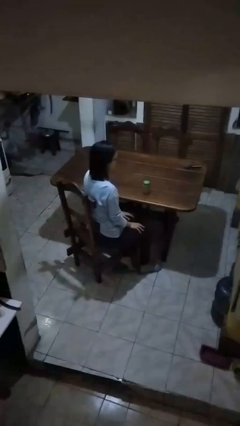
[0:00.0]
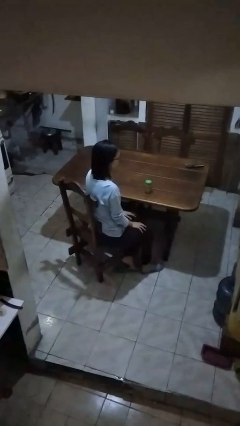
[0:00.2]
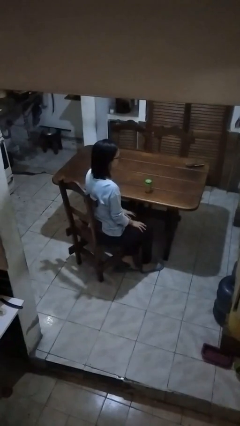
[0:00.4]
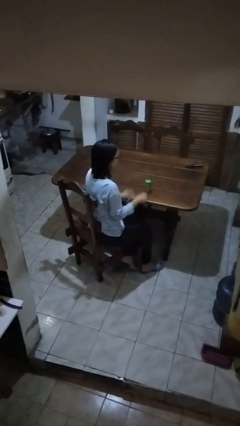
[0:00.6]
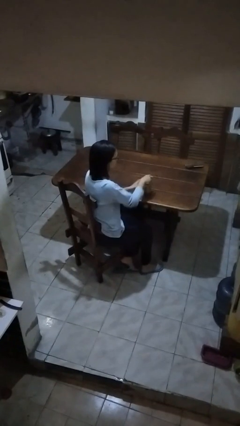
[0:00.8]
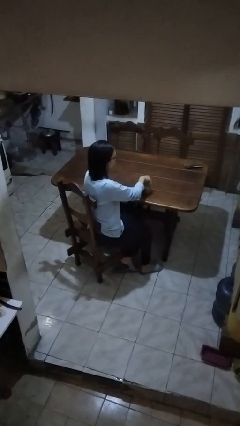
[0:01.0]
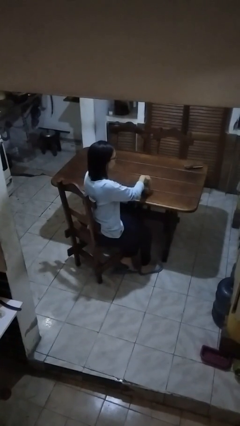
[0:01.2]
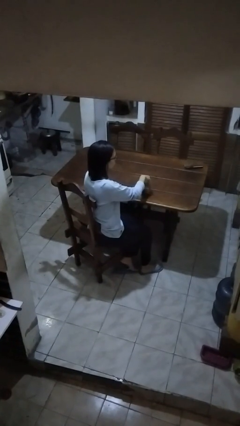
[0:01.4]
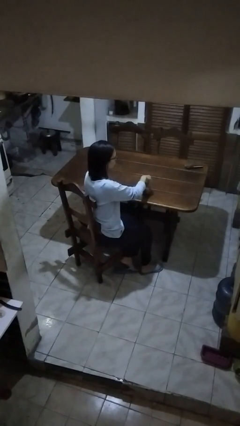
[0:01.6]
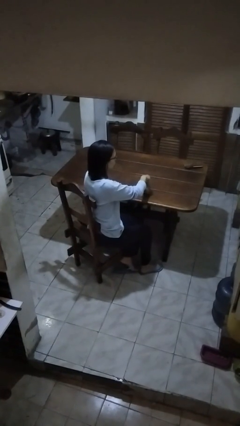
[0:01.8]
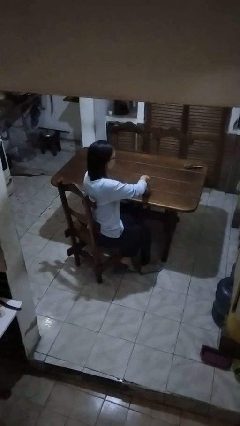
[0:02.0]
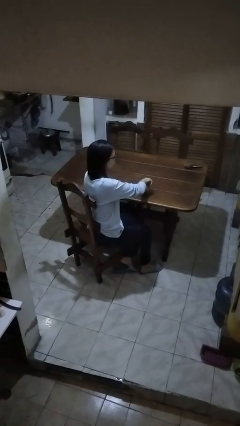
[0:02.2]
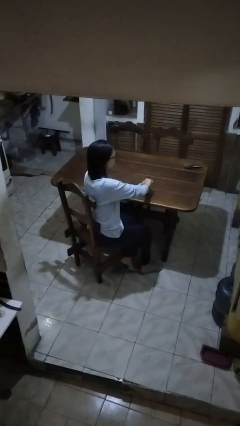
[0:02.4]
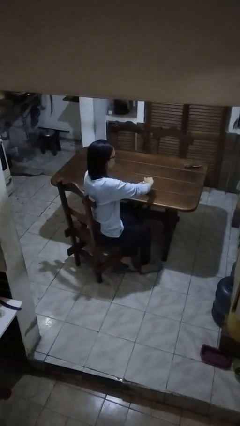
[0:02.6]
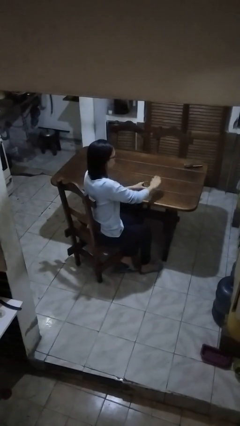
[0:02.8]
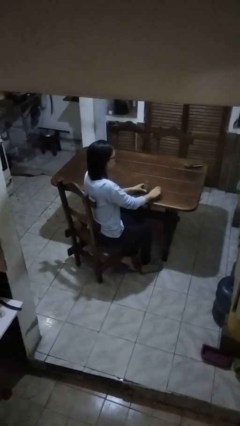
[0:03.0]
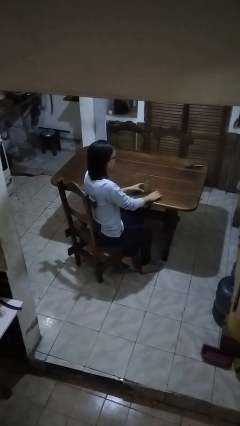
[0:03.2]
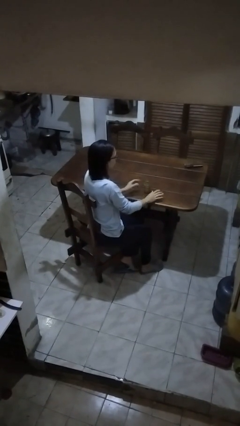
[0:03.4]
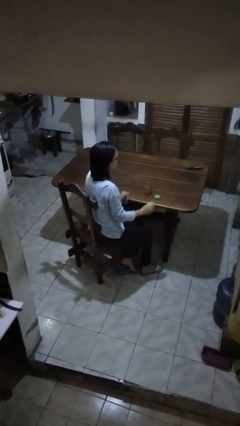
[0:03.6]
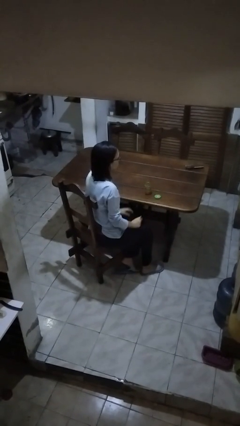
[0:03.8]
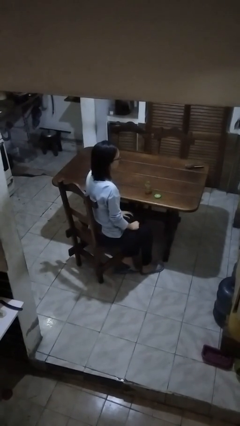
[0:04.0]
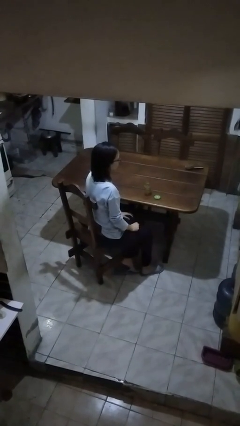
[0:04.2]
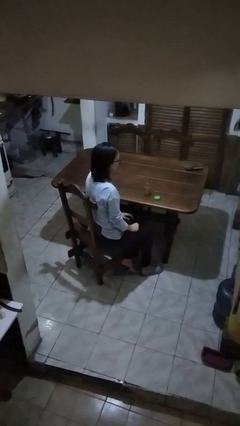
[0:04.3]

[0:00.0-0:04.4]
person opens jar

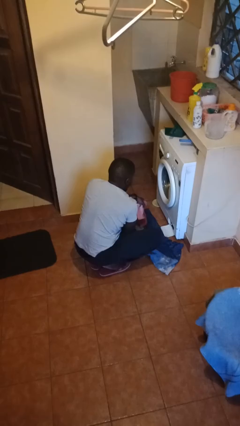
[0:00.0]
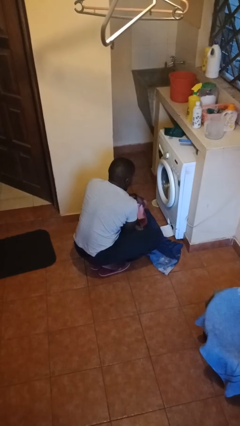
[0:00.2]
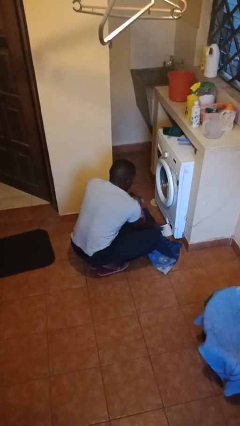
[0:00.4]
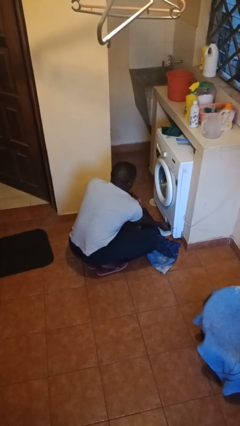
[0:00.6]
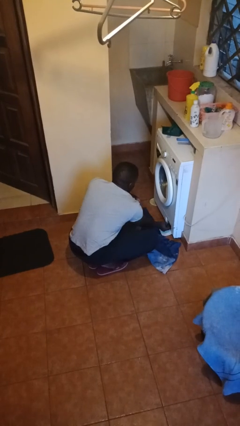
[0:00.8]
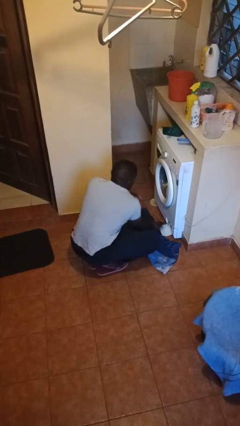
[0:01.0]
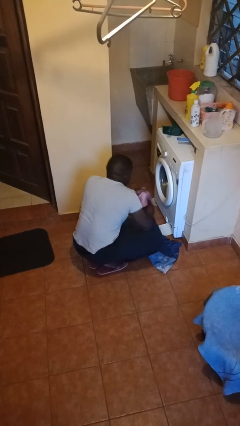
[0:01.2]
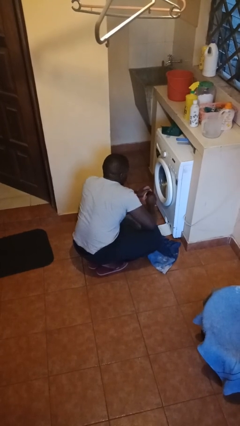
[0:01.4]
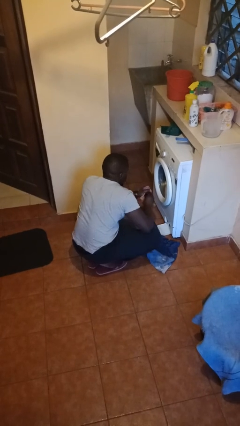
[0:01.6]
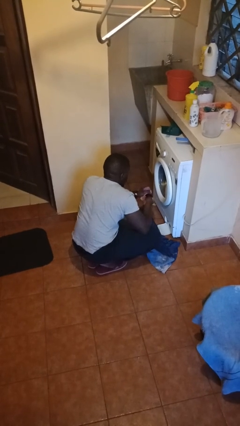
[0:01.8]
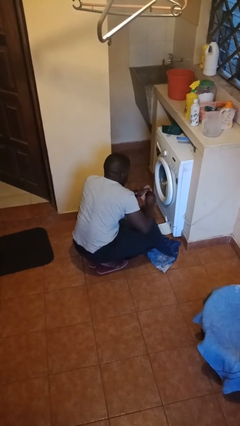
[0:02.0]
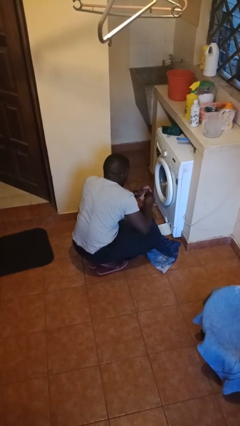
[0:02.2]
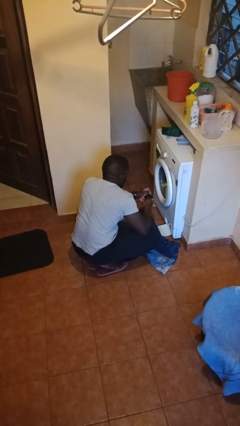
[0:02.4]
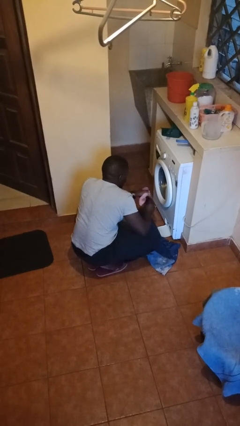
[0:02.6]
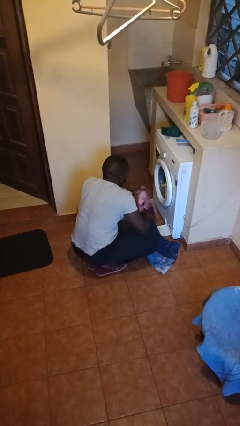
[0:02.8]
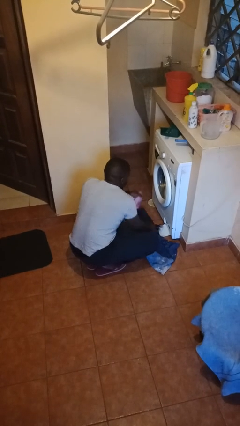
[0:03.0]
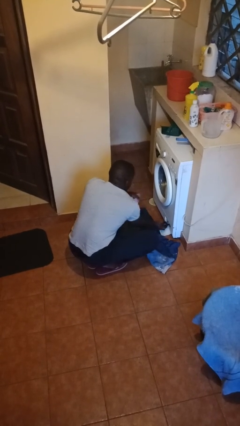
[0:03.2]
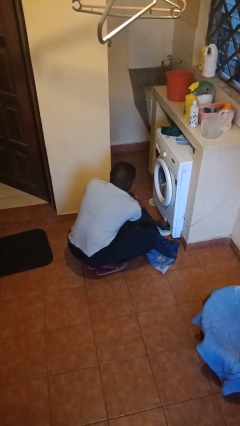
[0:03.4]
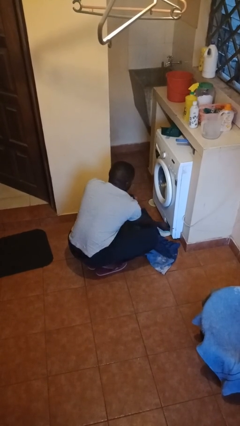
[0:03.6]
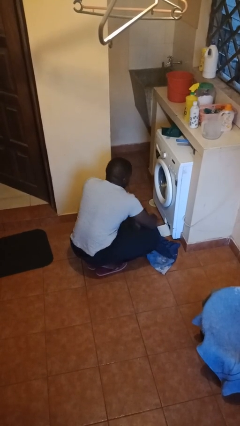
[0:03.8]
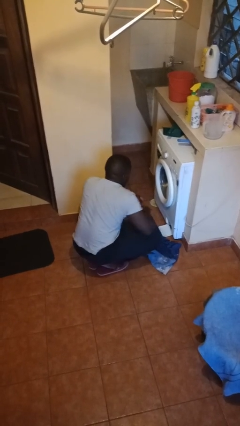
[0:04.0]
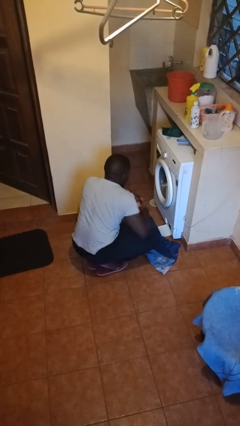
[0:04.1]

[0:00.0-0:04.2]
person cleans dryer lint trap

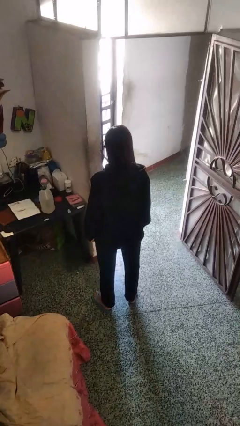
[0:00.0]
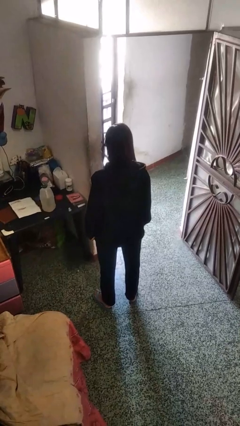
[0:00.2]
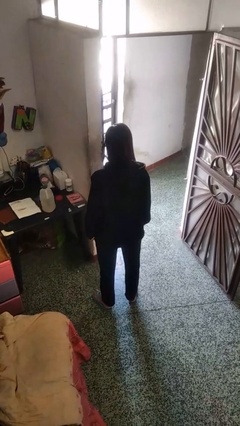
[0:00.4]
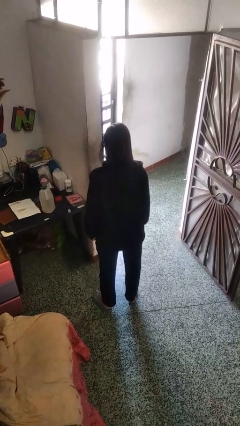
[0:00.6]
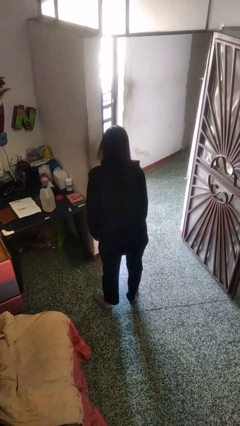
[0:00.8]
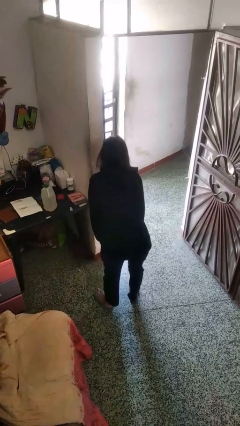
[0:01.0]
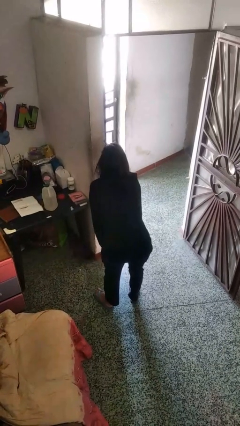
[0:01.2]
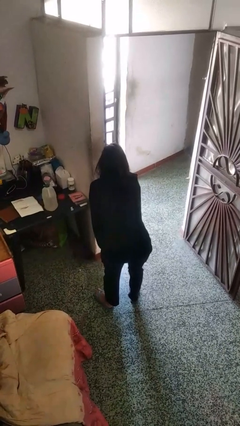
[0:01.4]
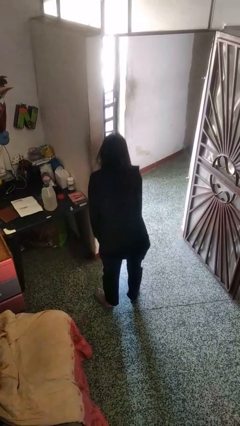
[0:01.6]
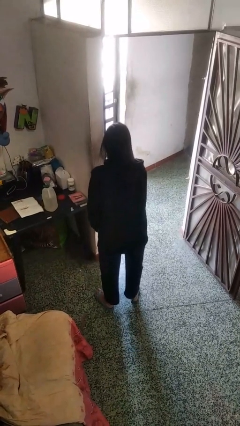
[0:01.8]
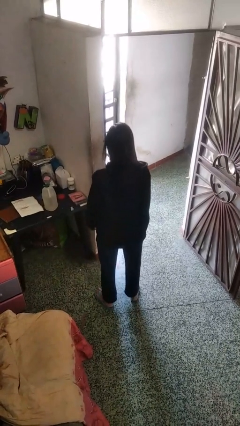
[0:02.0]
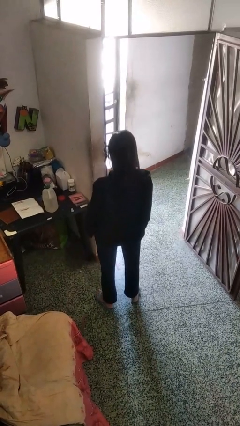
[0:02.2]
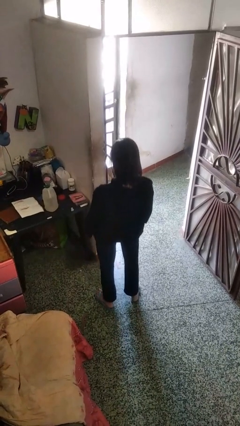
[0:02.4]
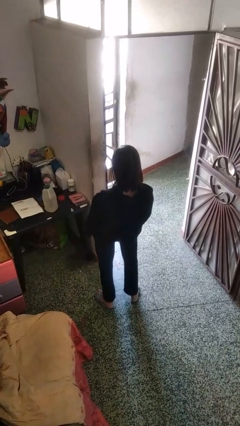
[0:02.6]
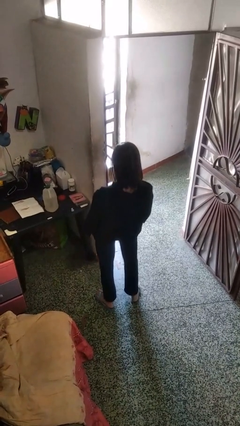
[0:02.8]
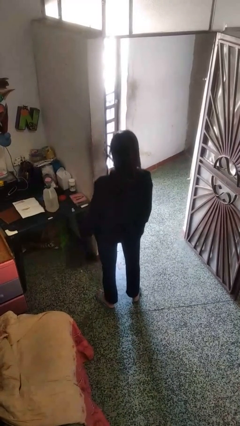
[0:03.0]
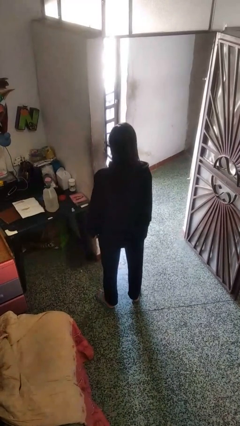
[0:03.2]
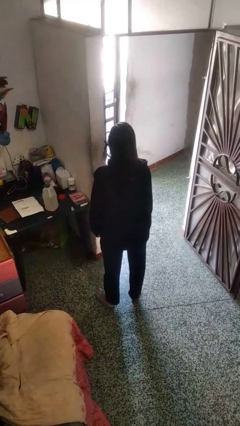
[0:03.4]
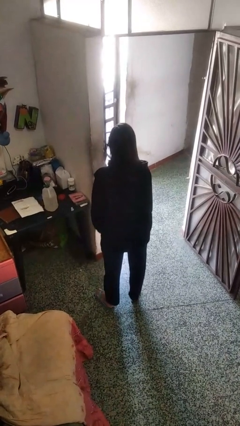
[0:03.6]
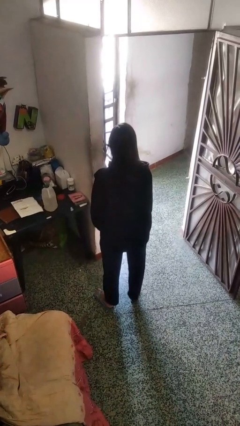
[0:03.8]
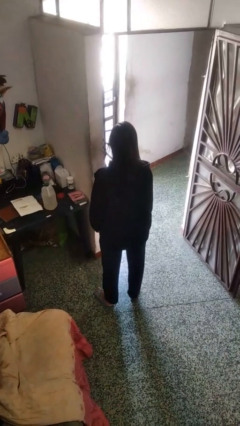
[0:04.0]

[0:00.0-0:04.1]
person wiggles hips

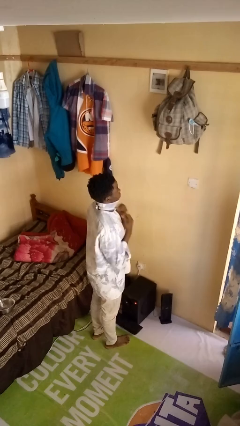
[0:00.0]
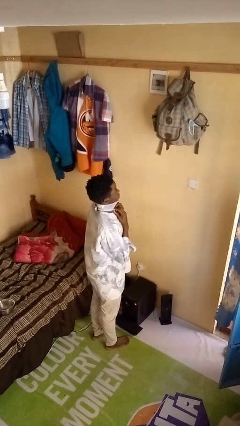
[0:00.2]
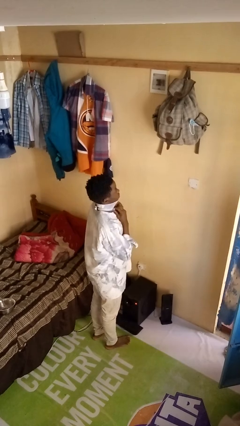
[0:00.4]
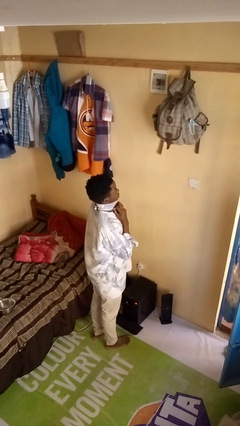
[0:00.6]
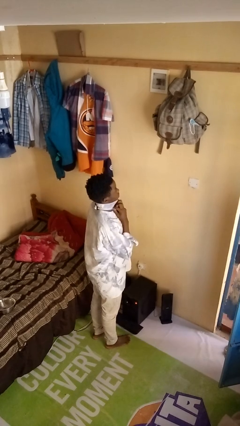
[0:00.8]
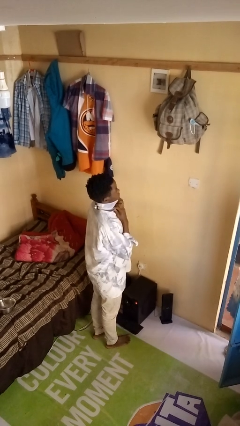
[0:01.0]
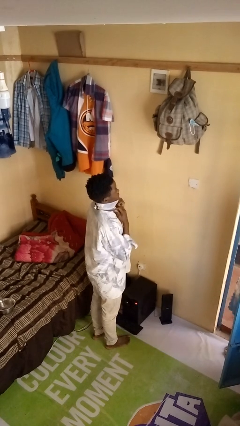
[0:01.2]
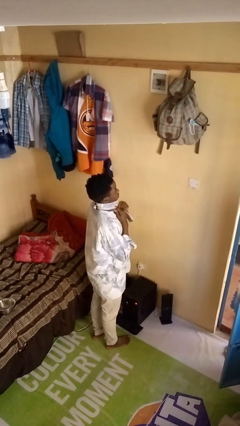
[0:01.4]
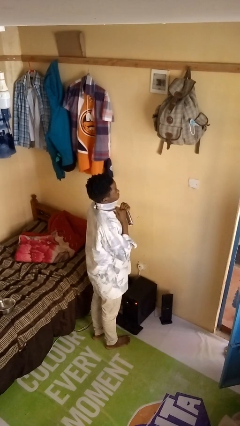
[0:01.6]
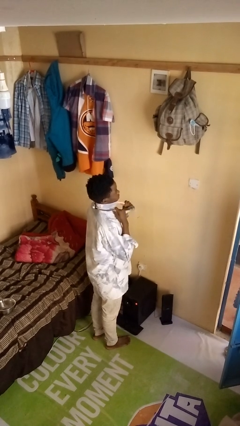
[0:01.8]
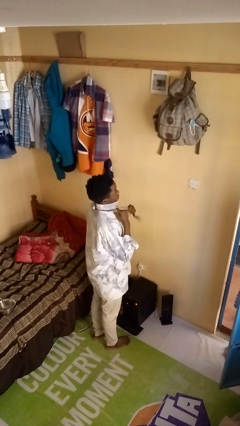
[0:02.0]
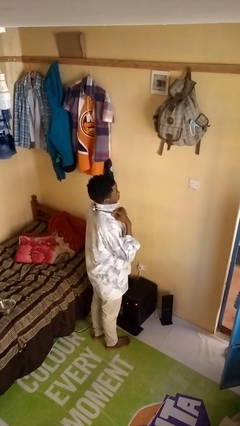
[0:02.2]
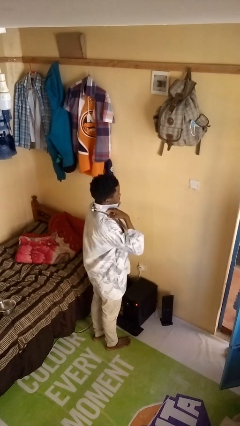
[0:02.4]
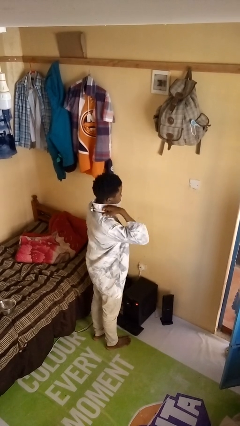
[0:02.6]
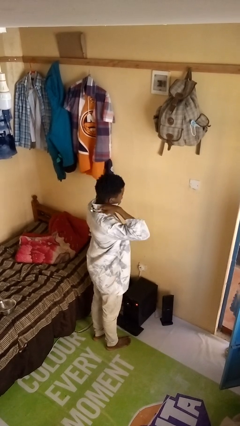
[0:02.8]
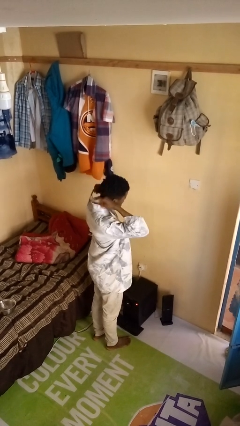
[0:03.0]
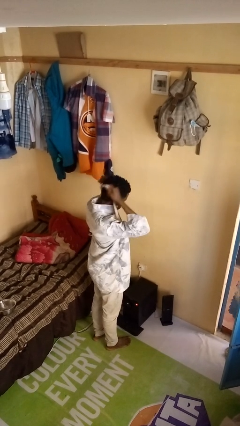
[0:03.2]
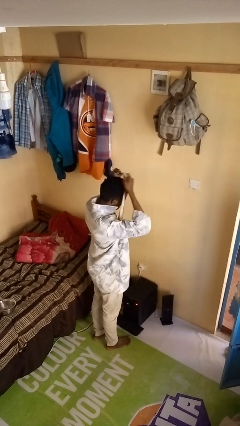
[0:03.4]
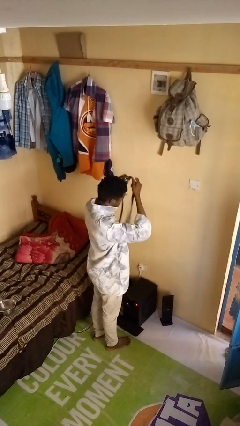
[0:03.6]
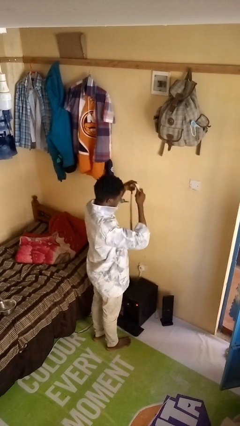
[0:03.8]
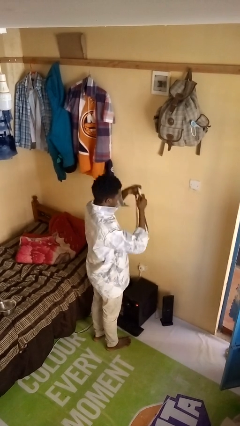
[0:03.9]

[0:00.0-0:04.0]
person takes off necktie

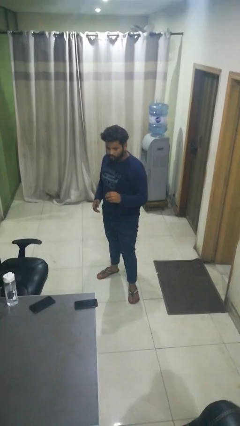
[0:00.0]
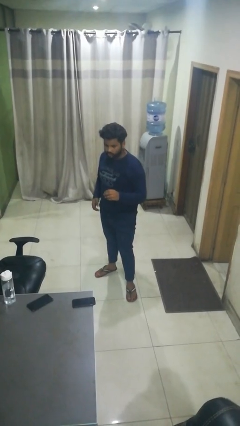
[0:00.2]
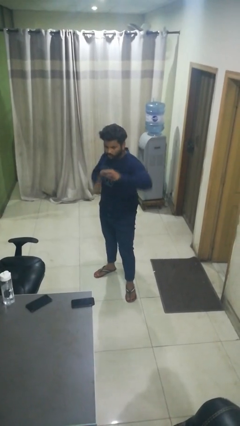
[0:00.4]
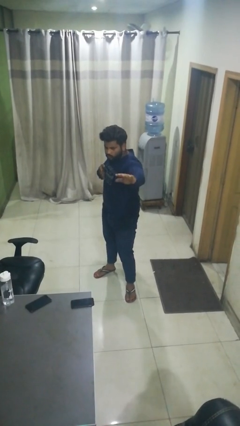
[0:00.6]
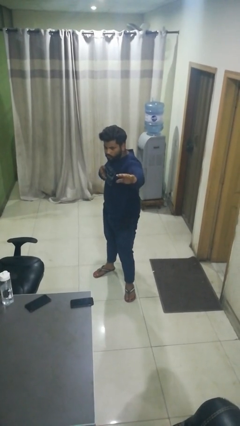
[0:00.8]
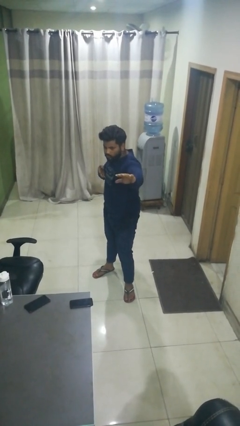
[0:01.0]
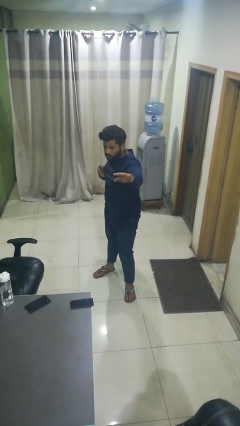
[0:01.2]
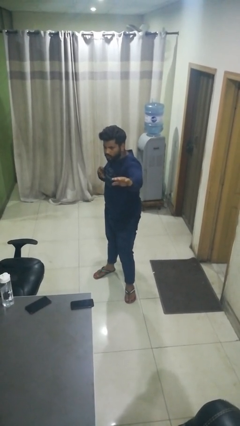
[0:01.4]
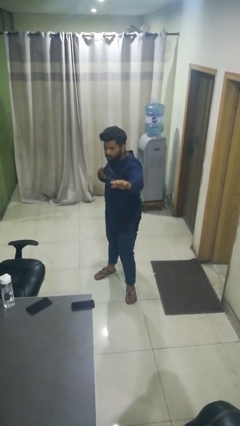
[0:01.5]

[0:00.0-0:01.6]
person karate chop
